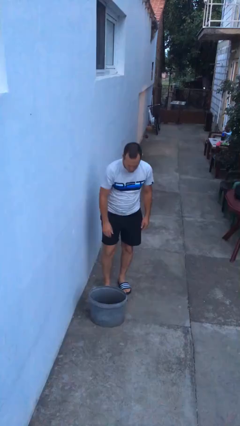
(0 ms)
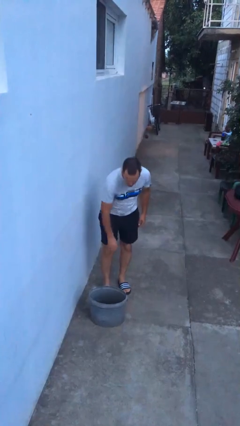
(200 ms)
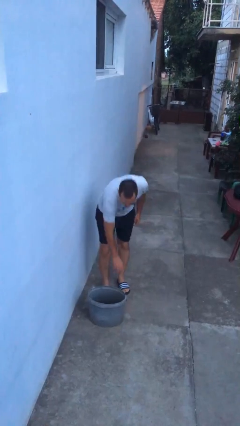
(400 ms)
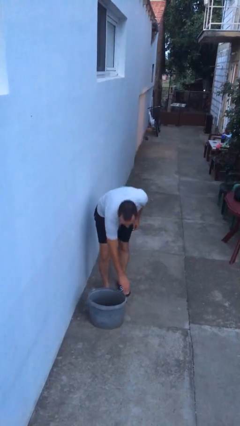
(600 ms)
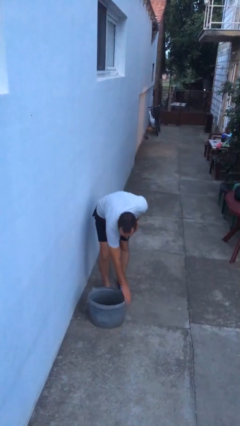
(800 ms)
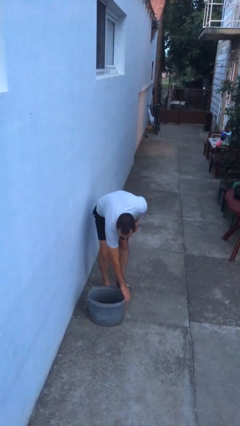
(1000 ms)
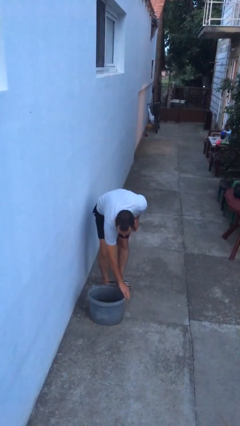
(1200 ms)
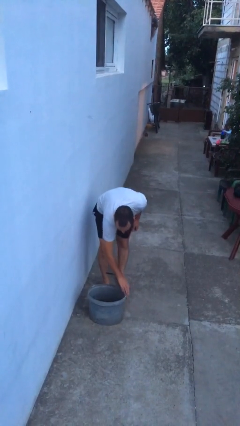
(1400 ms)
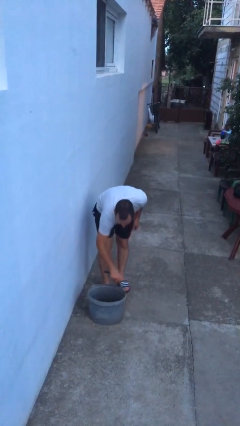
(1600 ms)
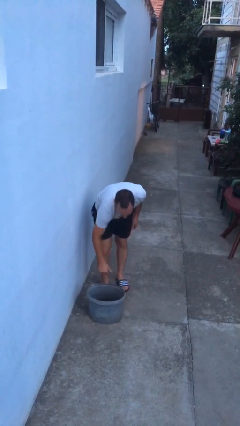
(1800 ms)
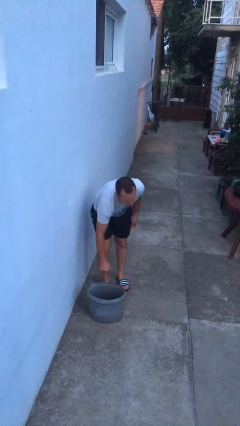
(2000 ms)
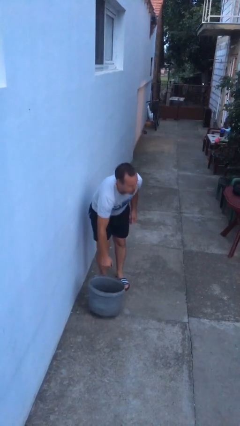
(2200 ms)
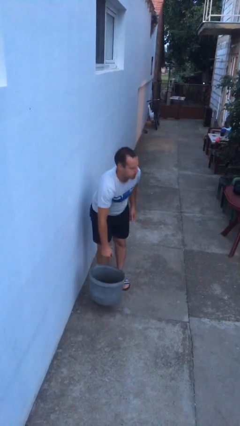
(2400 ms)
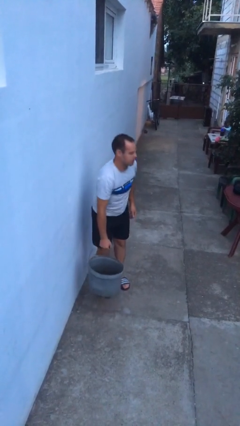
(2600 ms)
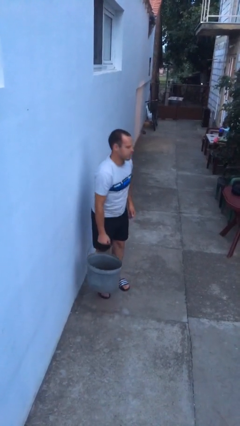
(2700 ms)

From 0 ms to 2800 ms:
person picks up object from floor

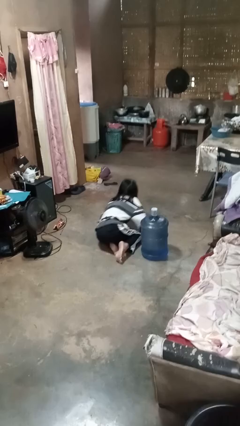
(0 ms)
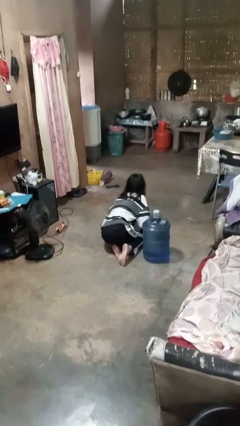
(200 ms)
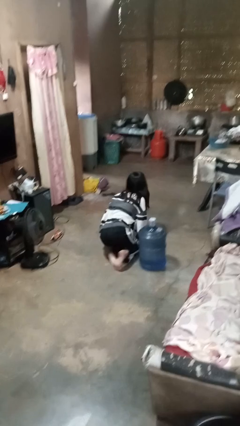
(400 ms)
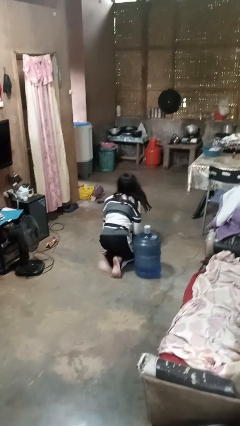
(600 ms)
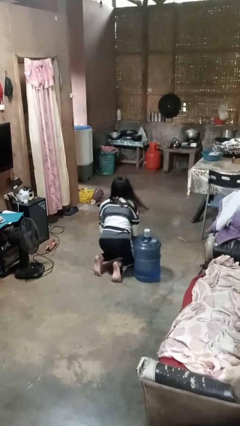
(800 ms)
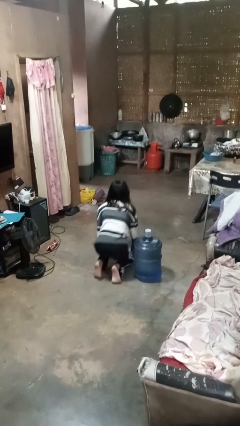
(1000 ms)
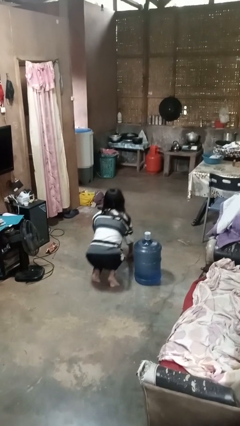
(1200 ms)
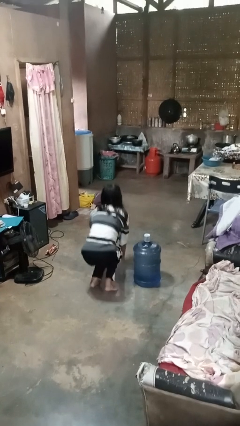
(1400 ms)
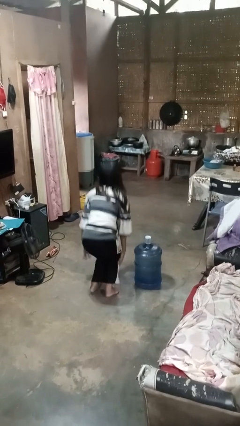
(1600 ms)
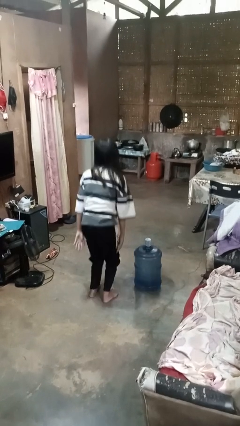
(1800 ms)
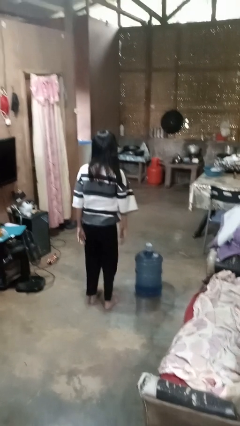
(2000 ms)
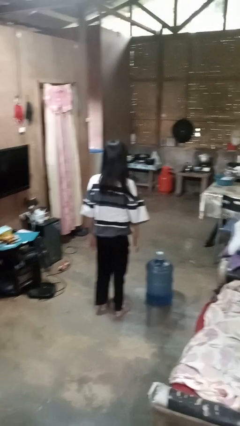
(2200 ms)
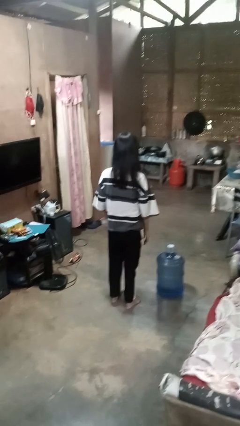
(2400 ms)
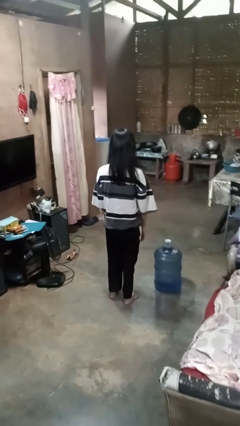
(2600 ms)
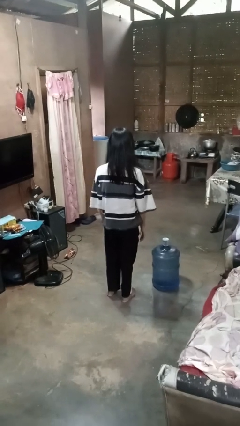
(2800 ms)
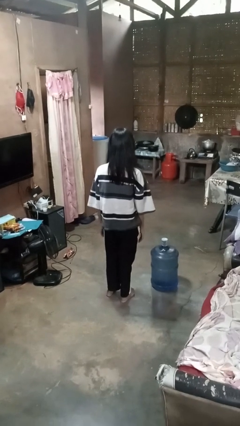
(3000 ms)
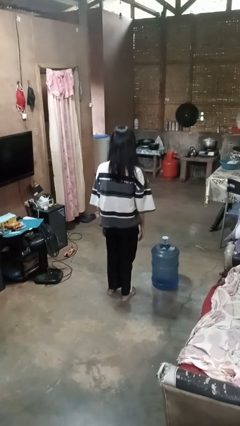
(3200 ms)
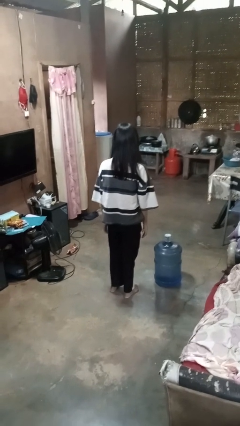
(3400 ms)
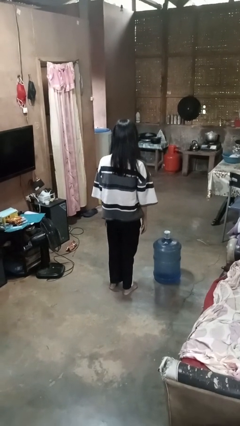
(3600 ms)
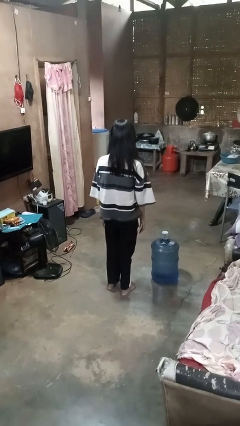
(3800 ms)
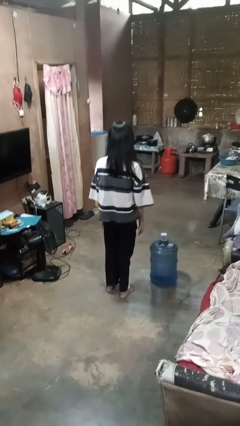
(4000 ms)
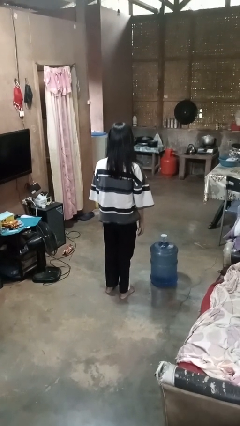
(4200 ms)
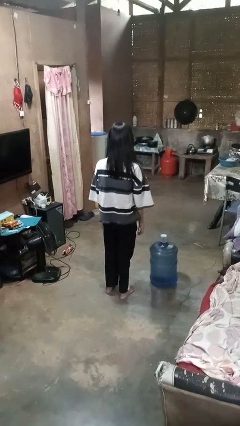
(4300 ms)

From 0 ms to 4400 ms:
person stands up from floor

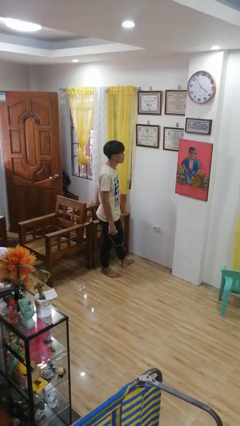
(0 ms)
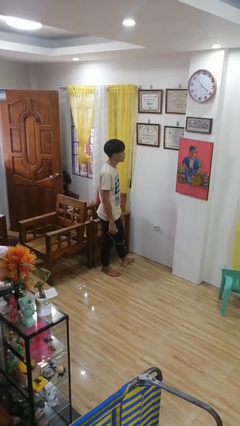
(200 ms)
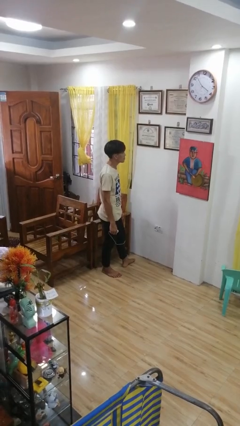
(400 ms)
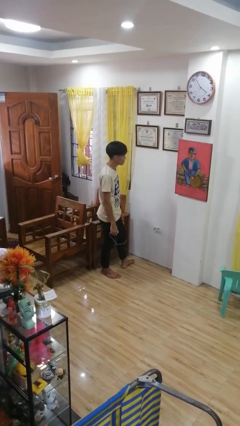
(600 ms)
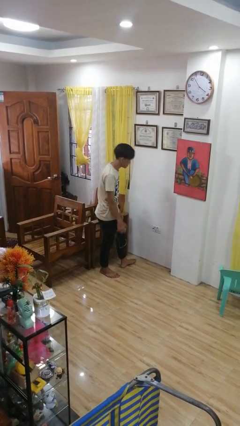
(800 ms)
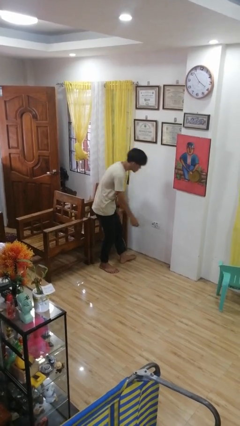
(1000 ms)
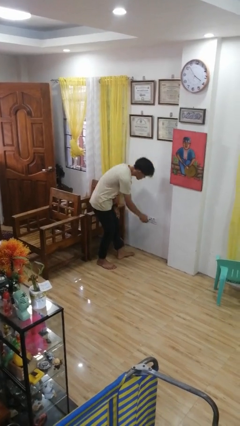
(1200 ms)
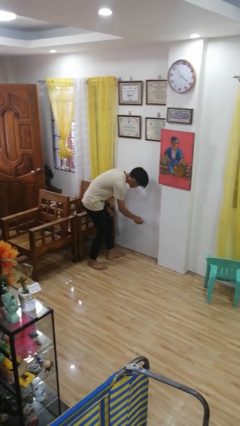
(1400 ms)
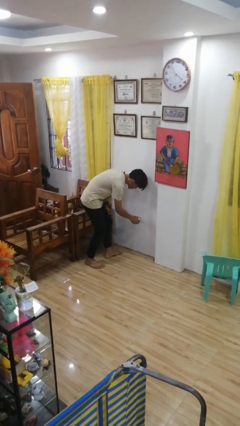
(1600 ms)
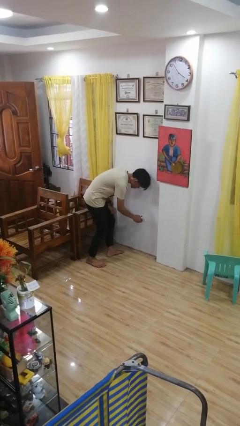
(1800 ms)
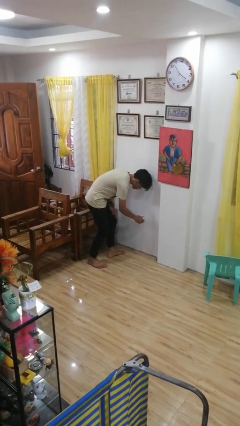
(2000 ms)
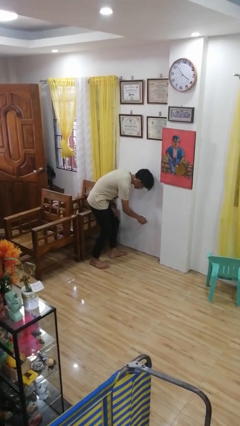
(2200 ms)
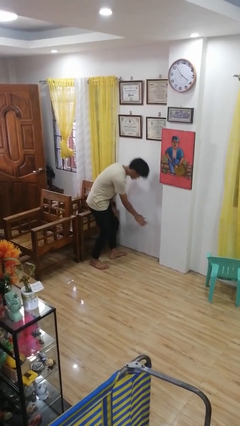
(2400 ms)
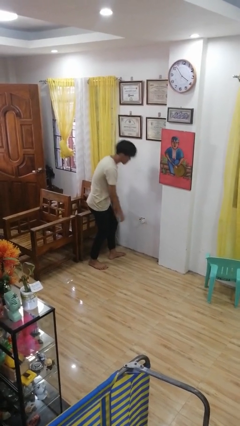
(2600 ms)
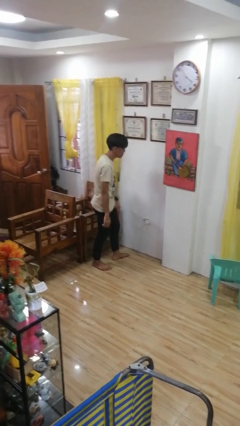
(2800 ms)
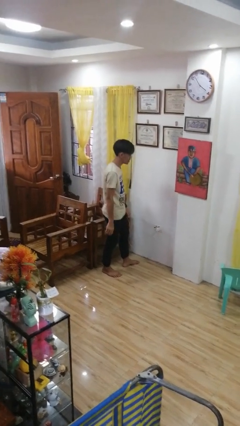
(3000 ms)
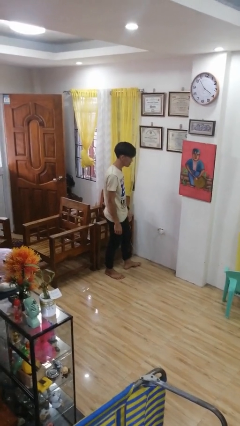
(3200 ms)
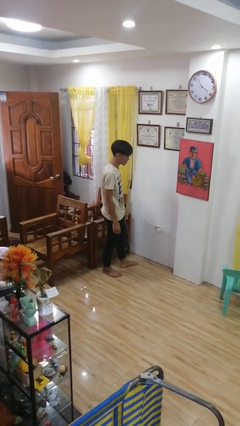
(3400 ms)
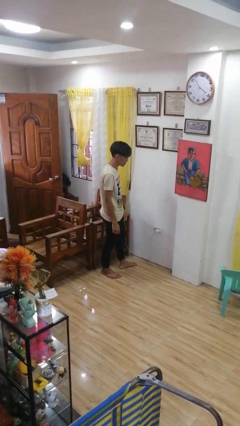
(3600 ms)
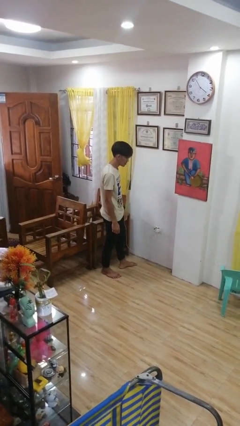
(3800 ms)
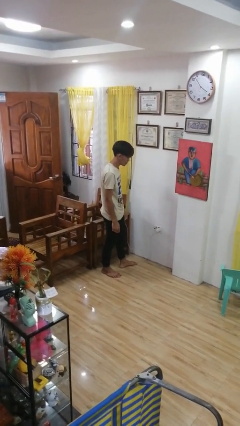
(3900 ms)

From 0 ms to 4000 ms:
person plugs into electrical socket

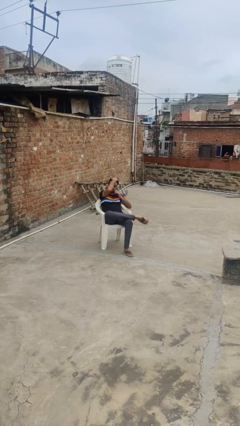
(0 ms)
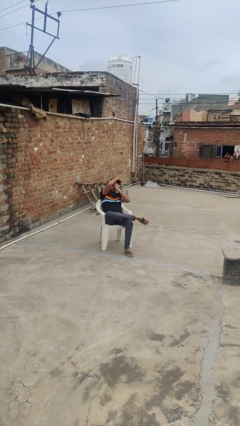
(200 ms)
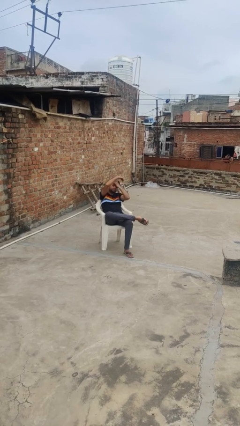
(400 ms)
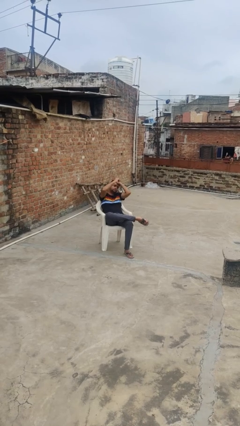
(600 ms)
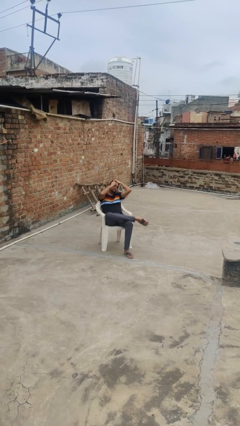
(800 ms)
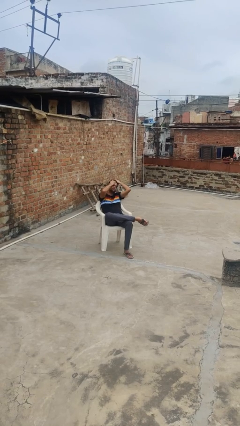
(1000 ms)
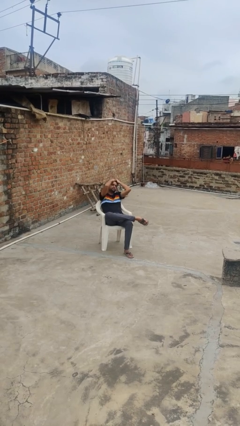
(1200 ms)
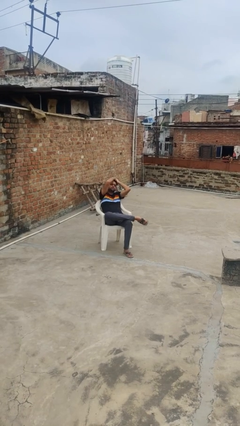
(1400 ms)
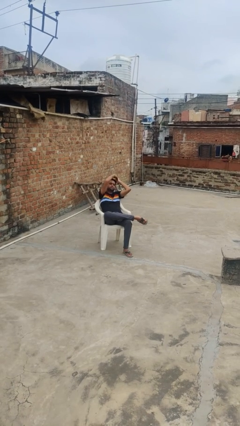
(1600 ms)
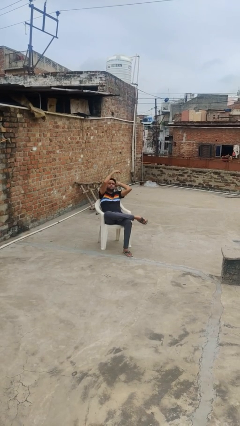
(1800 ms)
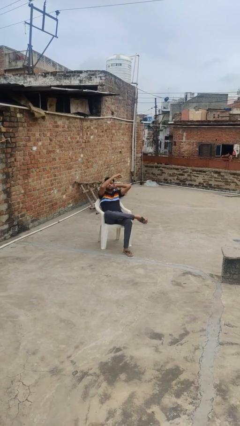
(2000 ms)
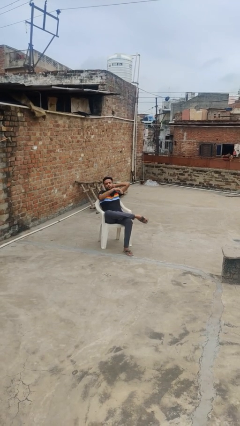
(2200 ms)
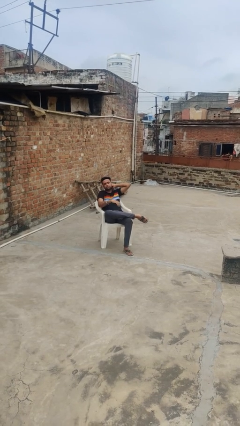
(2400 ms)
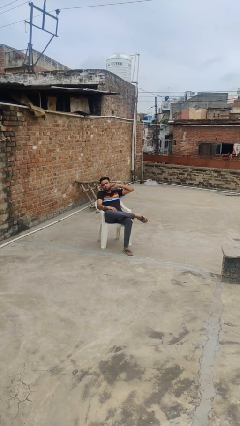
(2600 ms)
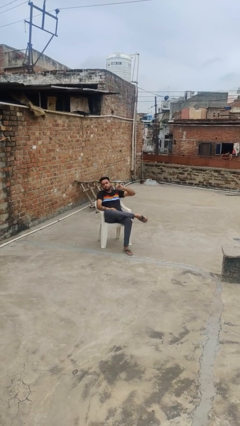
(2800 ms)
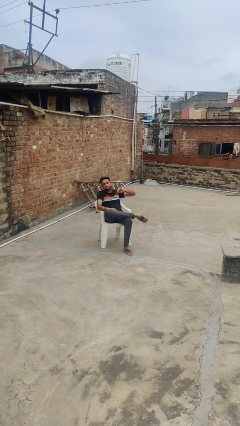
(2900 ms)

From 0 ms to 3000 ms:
person strokes hair

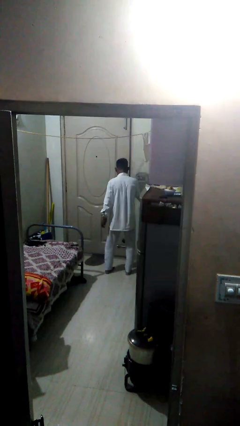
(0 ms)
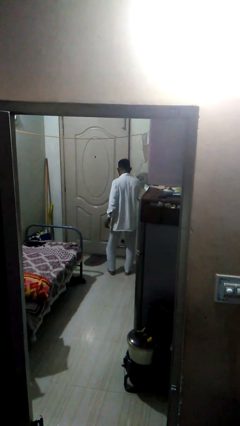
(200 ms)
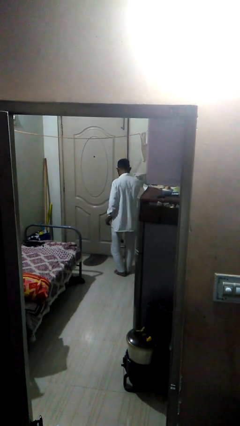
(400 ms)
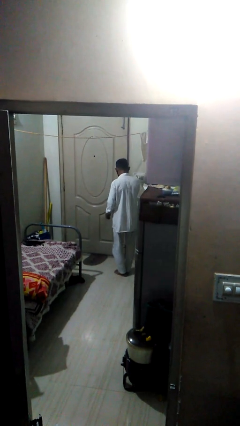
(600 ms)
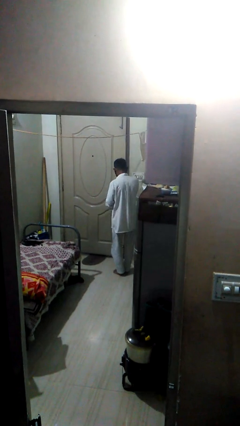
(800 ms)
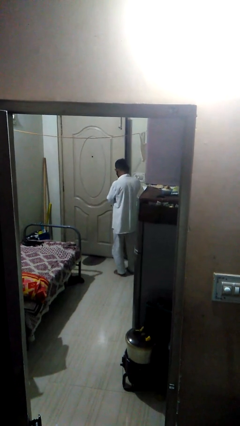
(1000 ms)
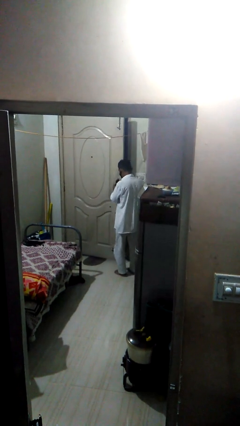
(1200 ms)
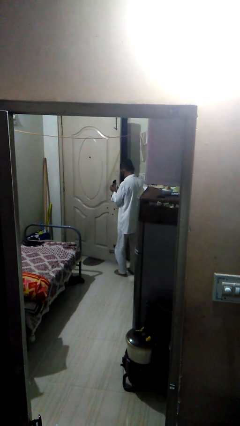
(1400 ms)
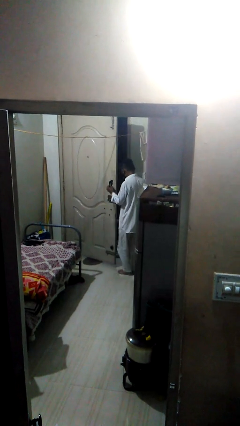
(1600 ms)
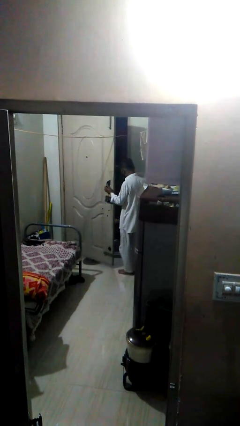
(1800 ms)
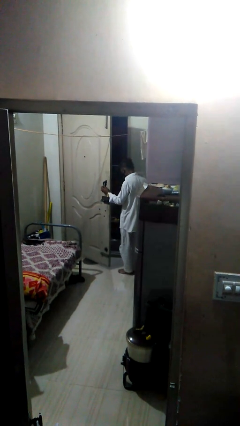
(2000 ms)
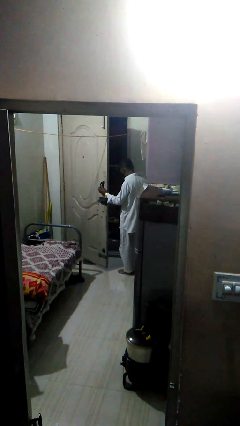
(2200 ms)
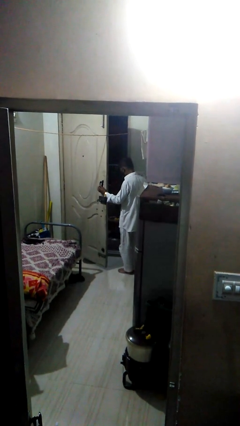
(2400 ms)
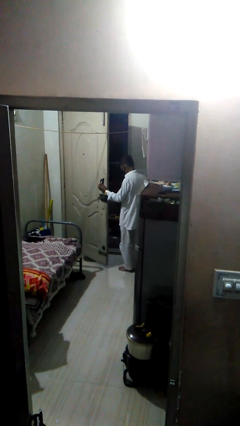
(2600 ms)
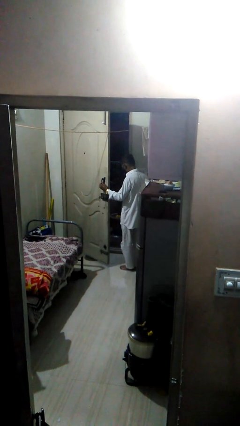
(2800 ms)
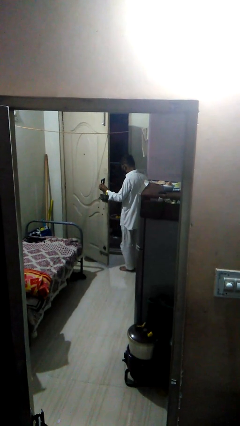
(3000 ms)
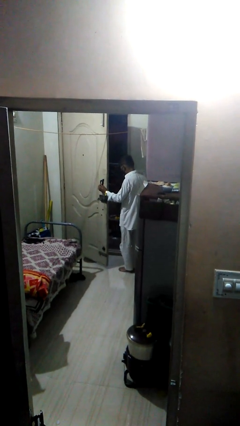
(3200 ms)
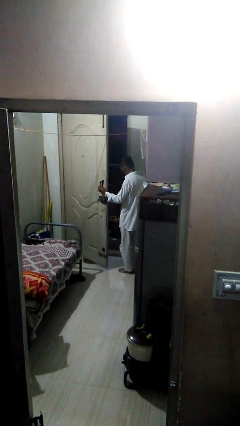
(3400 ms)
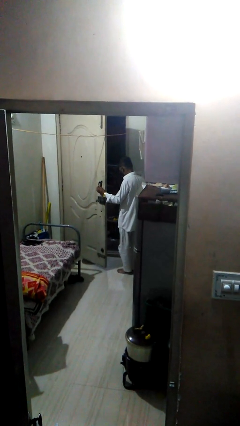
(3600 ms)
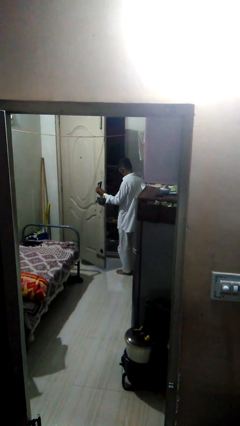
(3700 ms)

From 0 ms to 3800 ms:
person opens facility door
